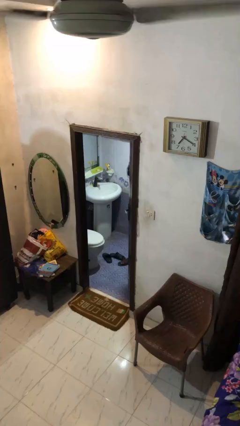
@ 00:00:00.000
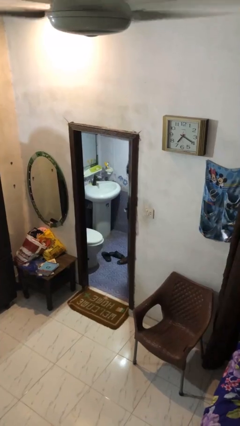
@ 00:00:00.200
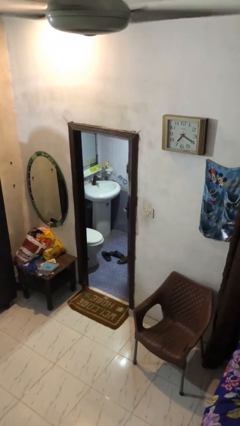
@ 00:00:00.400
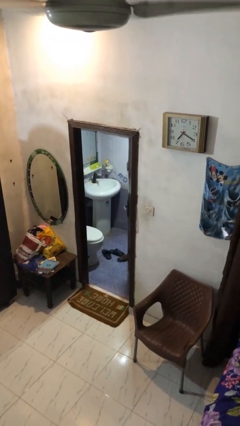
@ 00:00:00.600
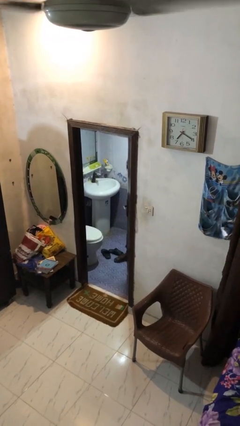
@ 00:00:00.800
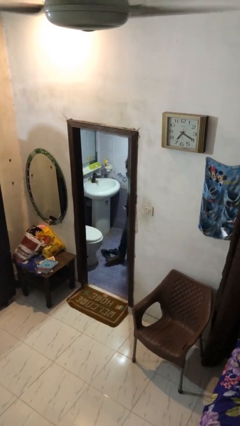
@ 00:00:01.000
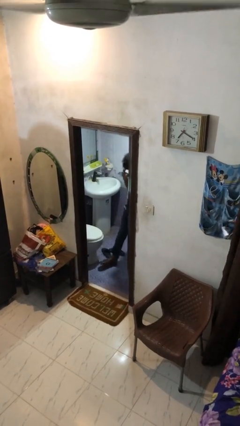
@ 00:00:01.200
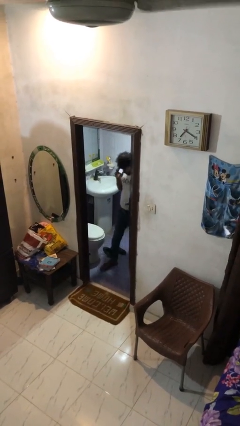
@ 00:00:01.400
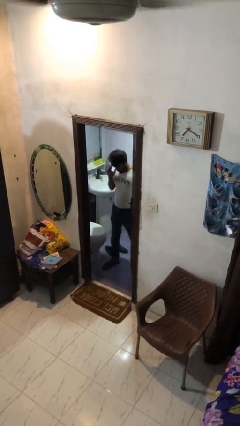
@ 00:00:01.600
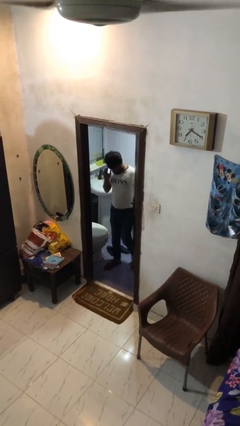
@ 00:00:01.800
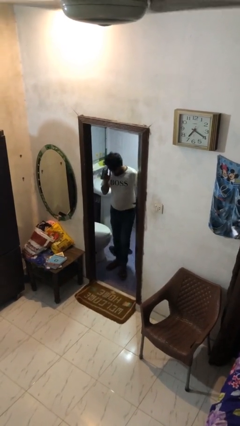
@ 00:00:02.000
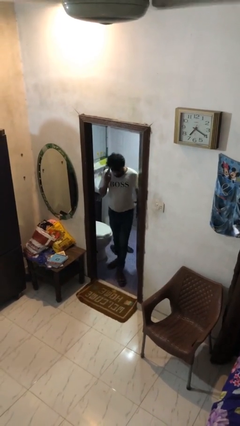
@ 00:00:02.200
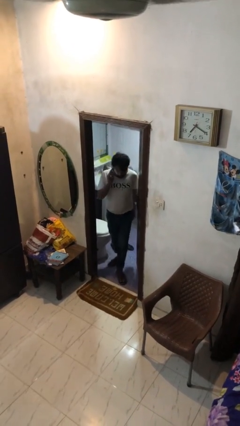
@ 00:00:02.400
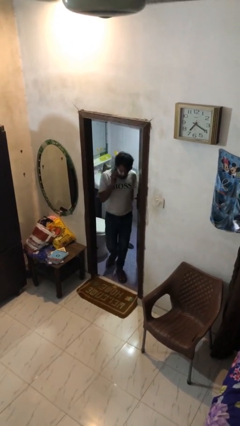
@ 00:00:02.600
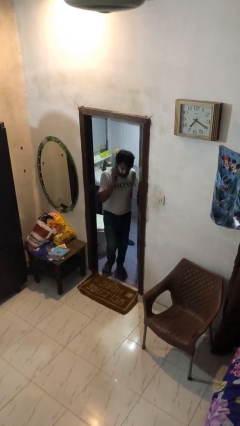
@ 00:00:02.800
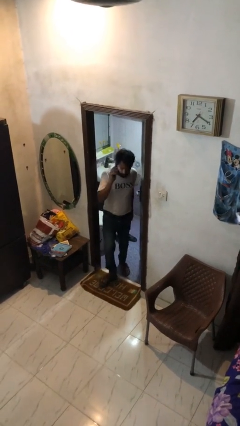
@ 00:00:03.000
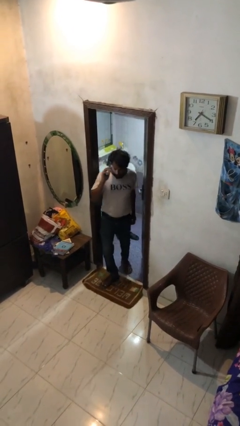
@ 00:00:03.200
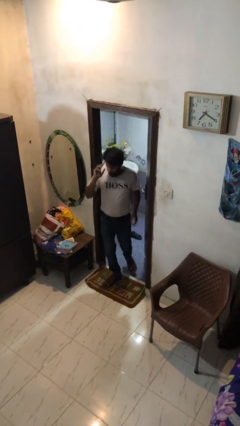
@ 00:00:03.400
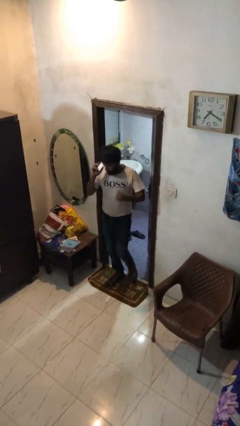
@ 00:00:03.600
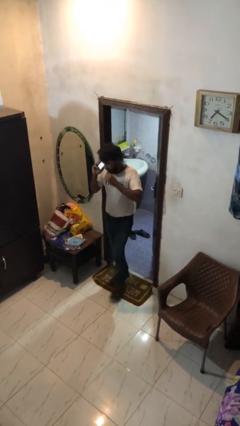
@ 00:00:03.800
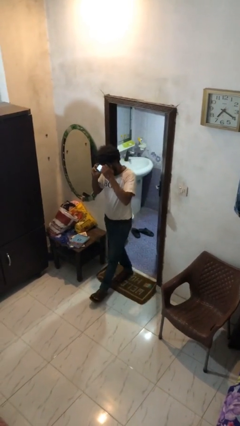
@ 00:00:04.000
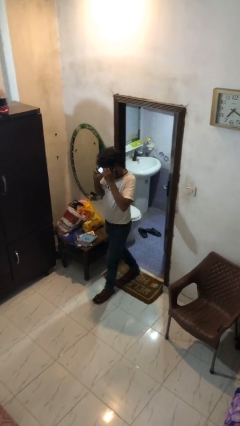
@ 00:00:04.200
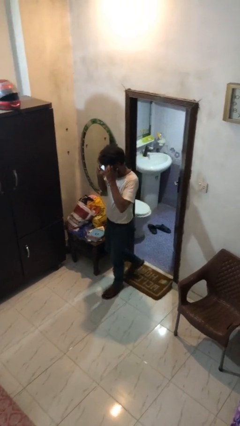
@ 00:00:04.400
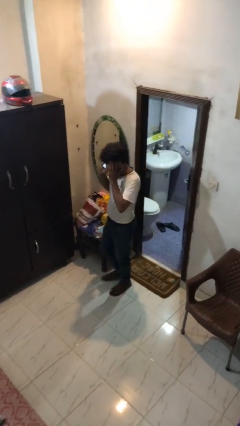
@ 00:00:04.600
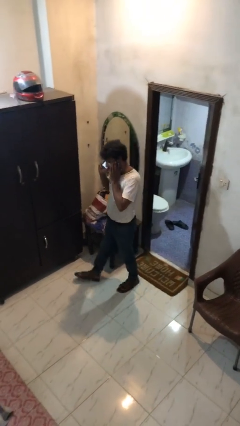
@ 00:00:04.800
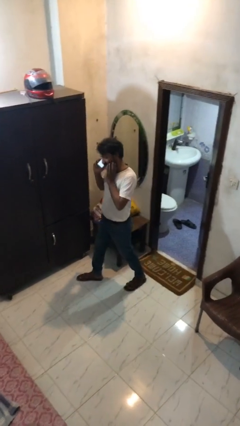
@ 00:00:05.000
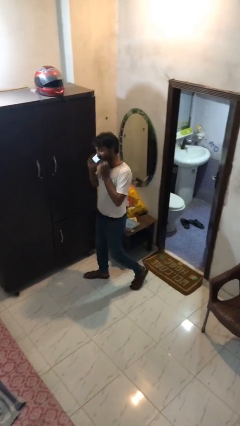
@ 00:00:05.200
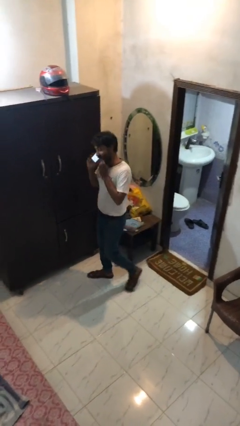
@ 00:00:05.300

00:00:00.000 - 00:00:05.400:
person enters scene through structure

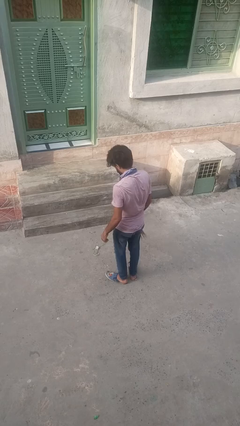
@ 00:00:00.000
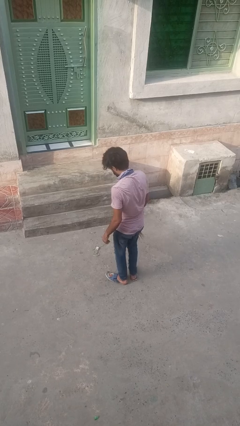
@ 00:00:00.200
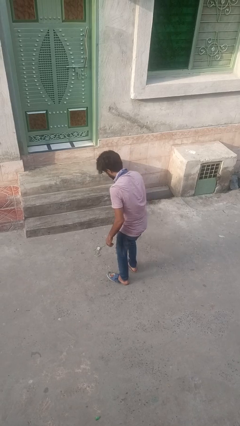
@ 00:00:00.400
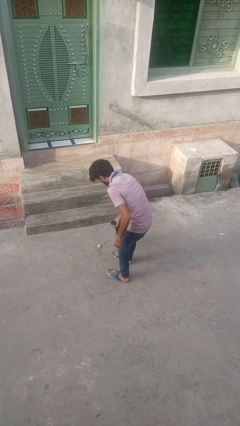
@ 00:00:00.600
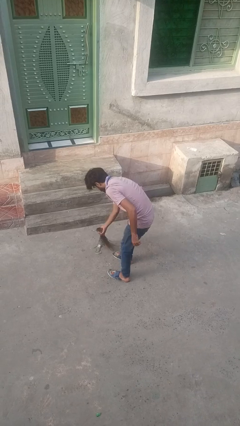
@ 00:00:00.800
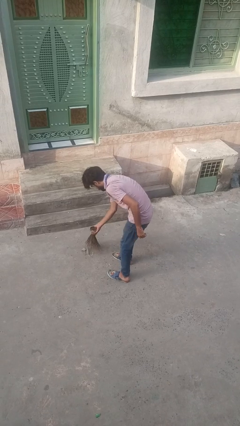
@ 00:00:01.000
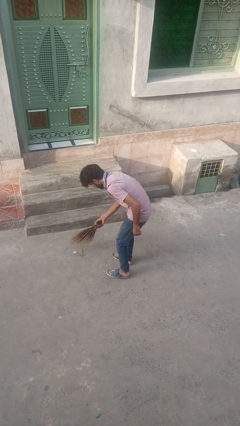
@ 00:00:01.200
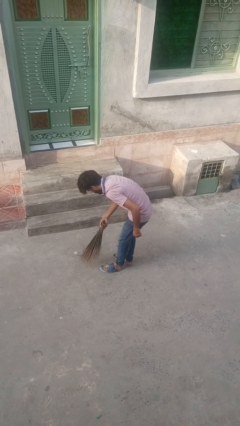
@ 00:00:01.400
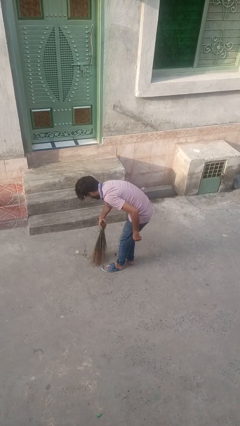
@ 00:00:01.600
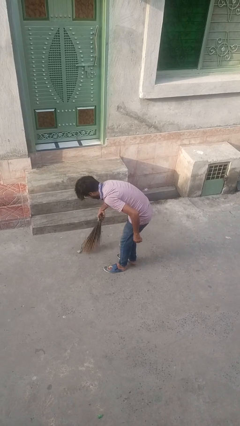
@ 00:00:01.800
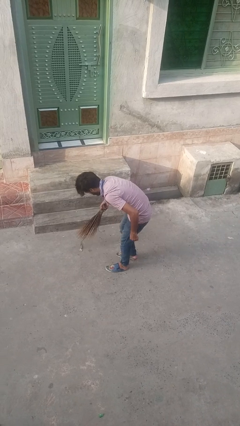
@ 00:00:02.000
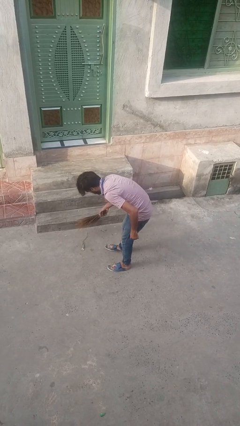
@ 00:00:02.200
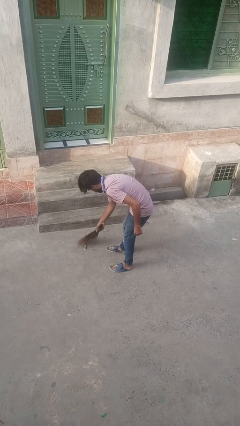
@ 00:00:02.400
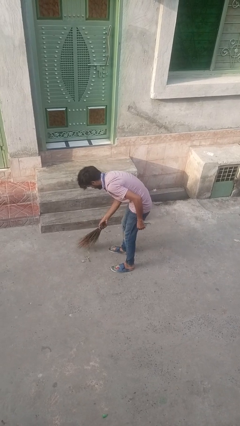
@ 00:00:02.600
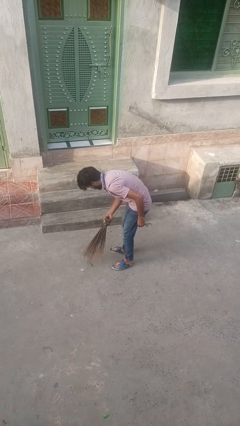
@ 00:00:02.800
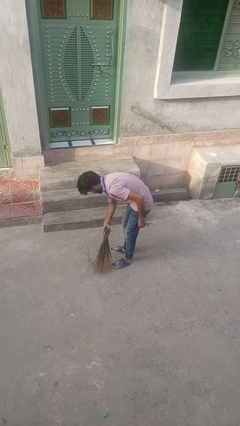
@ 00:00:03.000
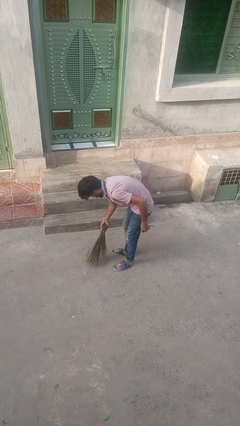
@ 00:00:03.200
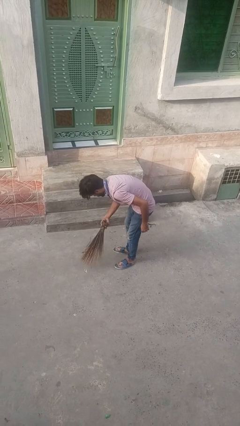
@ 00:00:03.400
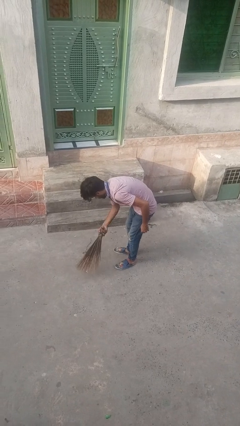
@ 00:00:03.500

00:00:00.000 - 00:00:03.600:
person sweeps floor

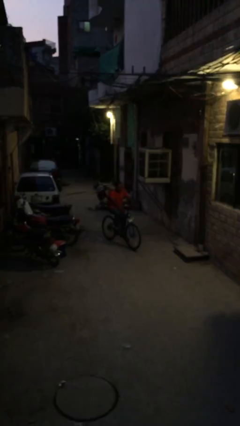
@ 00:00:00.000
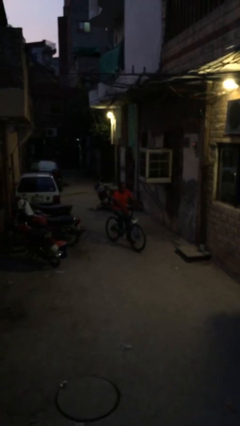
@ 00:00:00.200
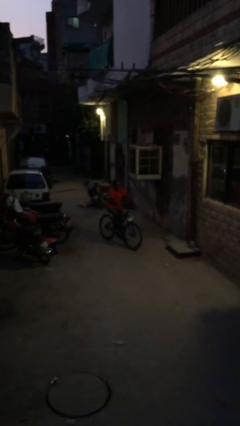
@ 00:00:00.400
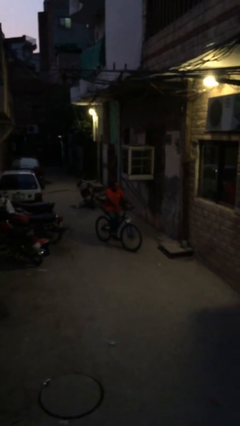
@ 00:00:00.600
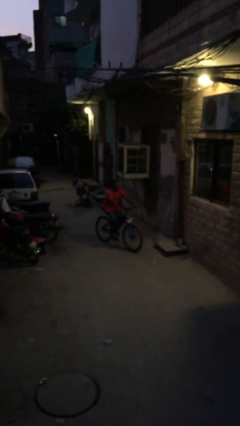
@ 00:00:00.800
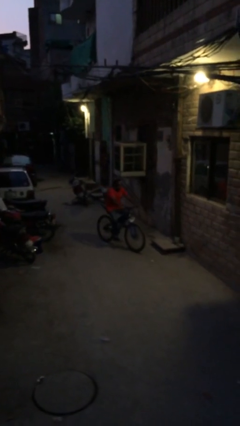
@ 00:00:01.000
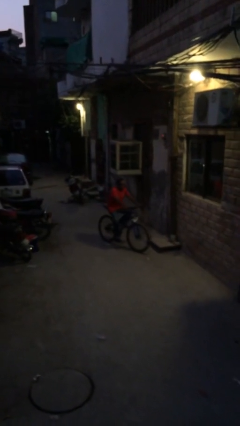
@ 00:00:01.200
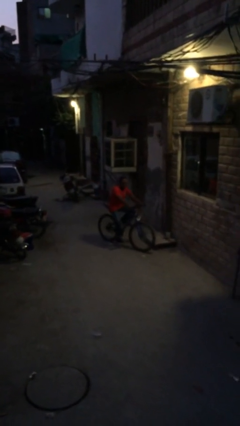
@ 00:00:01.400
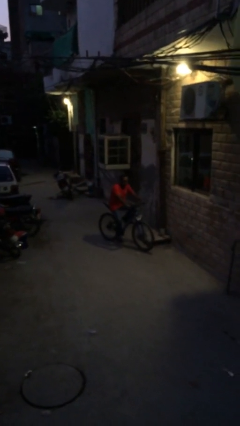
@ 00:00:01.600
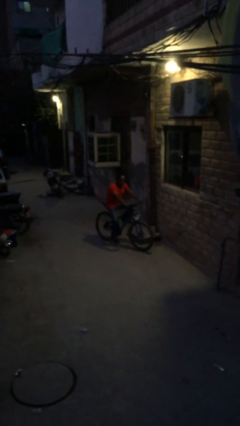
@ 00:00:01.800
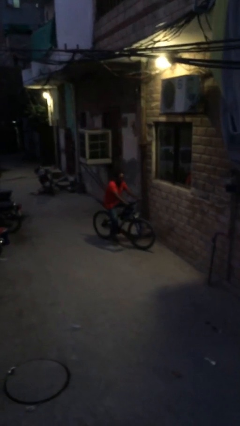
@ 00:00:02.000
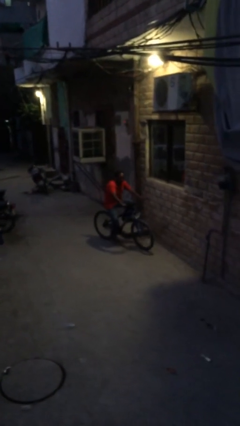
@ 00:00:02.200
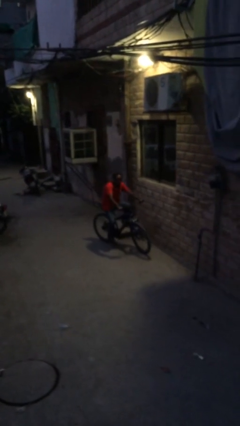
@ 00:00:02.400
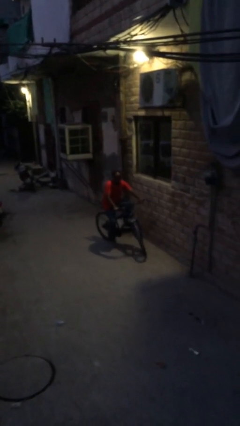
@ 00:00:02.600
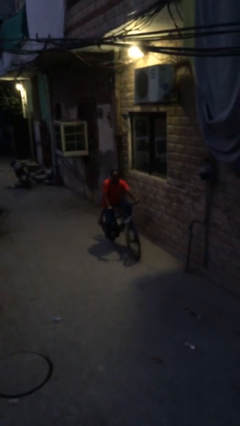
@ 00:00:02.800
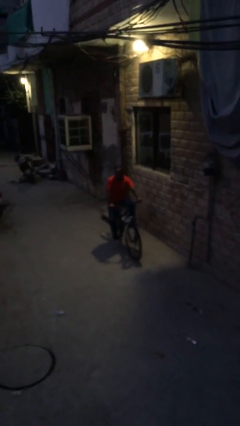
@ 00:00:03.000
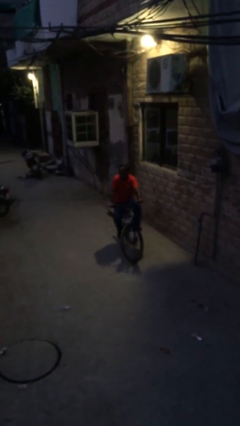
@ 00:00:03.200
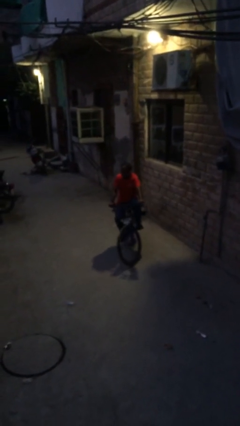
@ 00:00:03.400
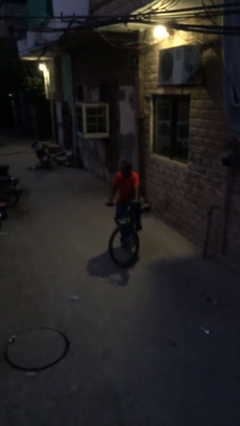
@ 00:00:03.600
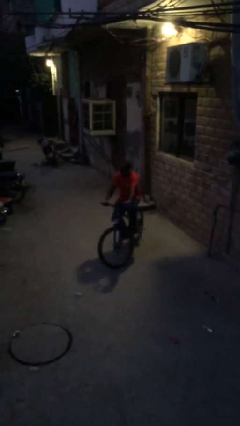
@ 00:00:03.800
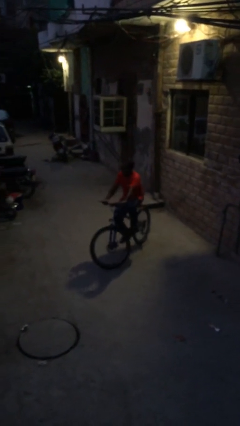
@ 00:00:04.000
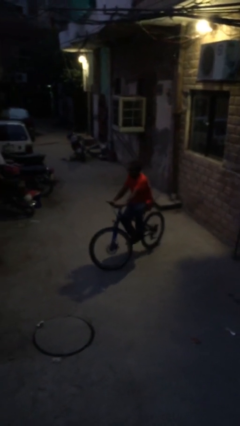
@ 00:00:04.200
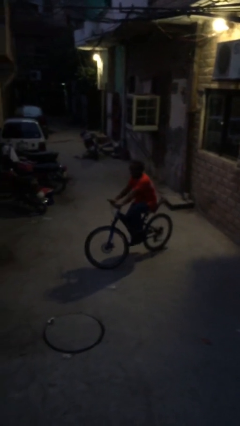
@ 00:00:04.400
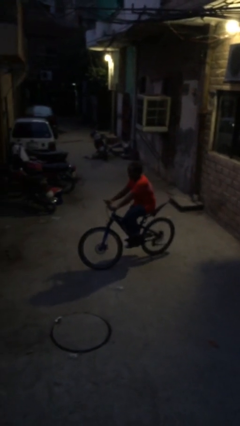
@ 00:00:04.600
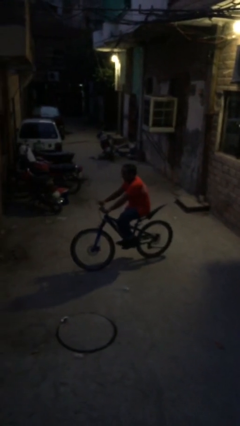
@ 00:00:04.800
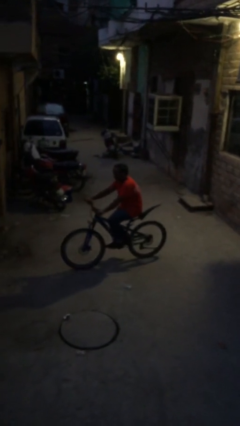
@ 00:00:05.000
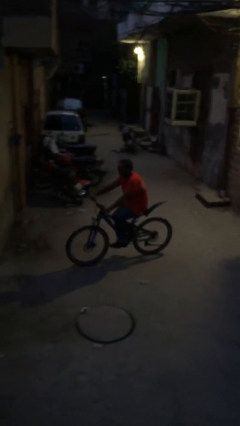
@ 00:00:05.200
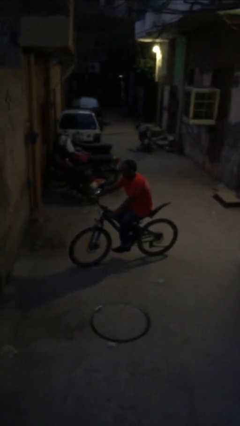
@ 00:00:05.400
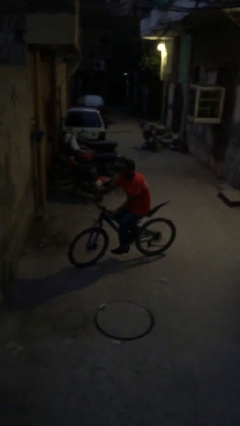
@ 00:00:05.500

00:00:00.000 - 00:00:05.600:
person rides bicycle

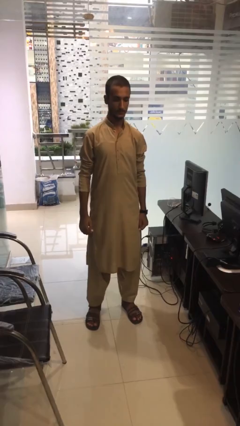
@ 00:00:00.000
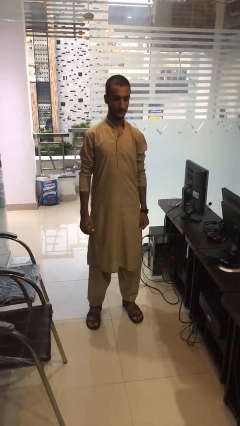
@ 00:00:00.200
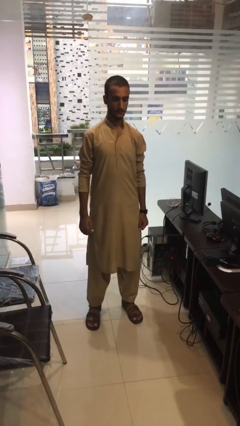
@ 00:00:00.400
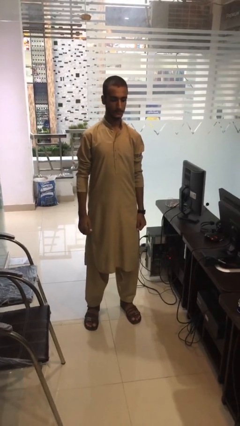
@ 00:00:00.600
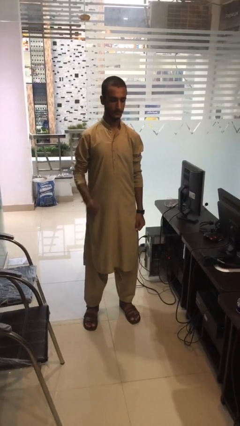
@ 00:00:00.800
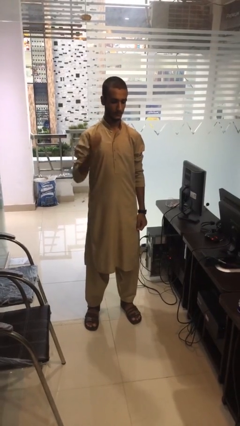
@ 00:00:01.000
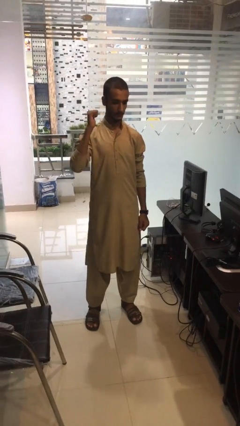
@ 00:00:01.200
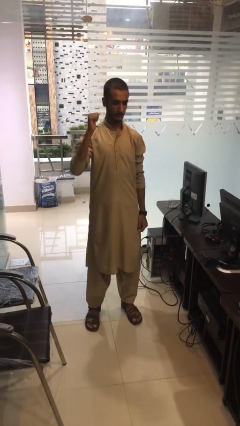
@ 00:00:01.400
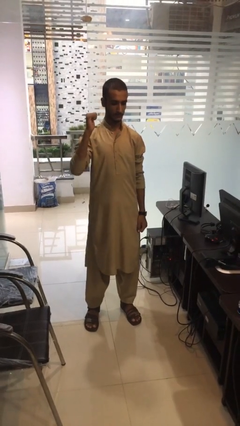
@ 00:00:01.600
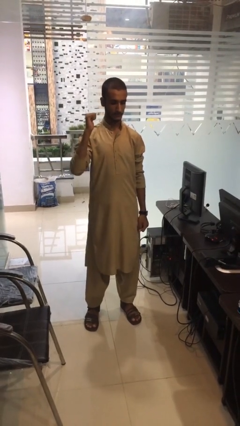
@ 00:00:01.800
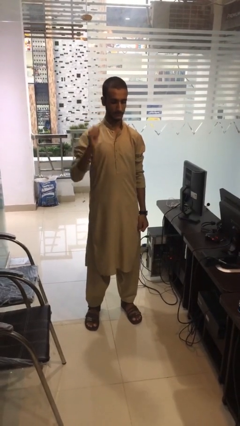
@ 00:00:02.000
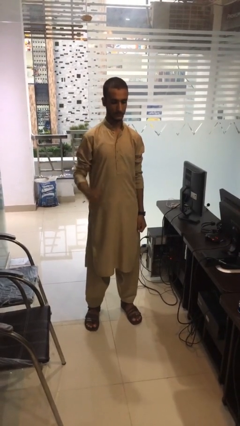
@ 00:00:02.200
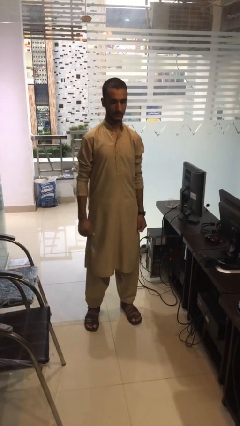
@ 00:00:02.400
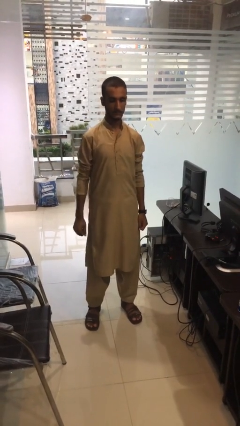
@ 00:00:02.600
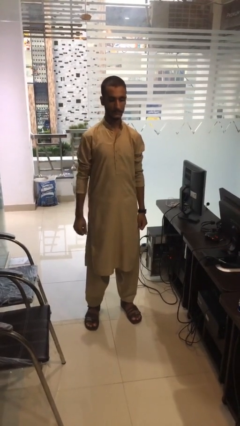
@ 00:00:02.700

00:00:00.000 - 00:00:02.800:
person gestures behind me
